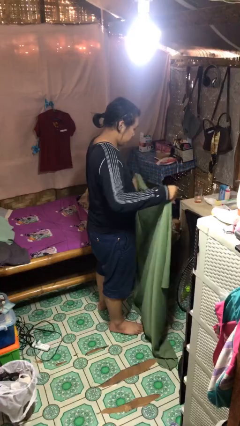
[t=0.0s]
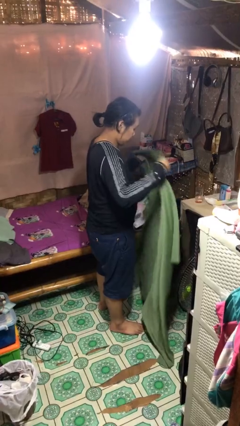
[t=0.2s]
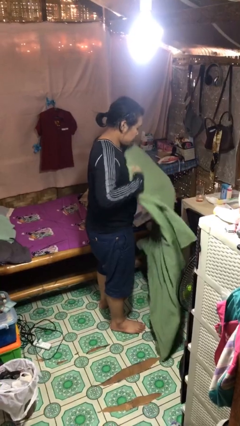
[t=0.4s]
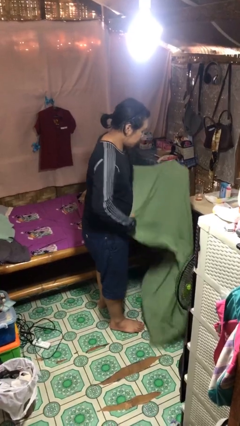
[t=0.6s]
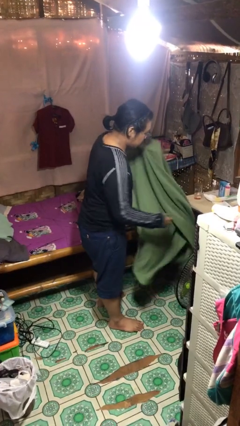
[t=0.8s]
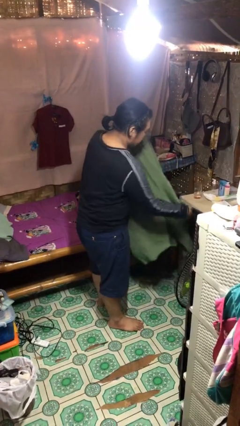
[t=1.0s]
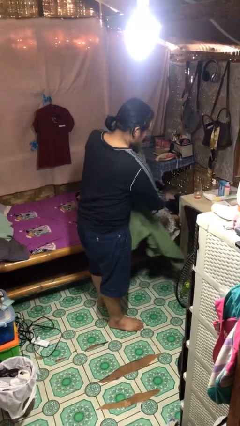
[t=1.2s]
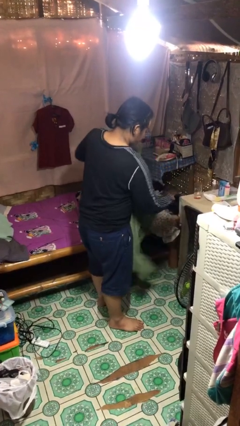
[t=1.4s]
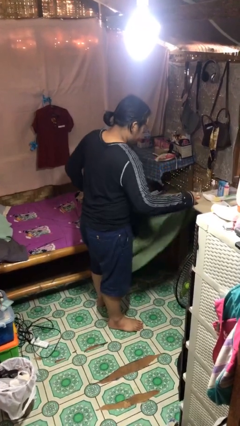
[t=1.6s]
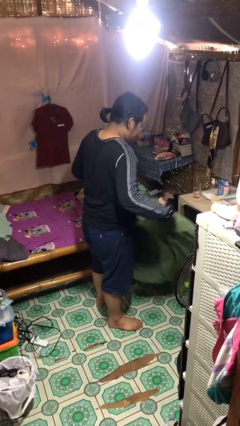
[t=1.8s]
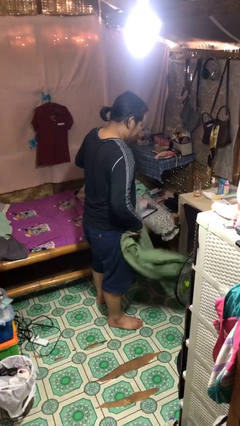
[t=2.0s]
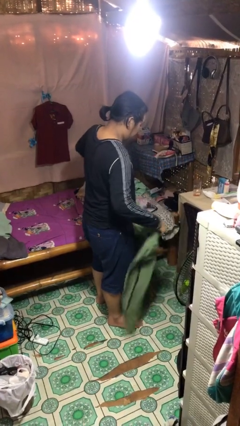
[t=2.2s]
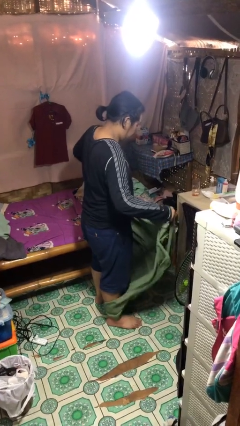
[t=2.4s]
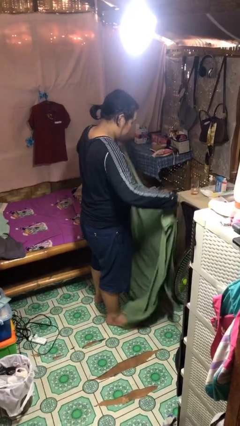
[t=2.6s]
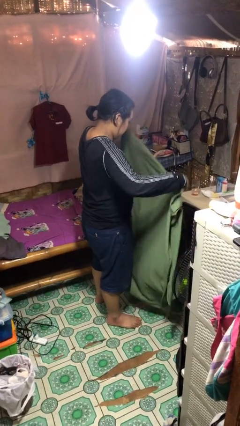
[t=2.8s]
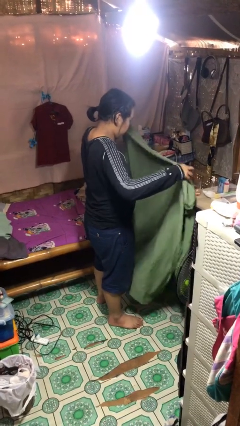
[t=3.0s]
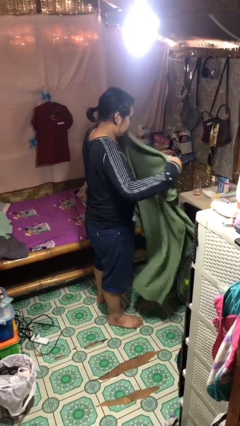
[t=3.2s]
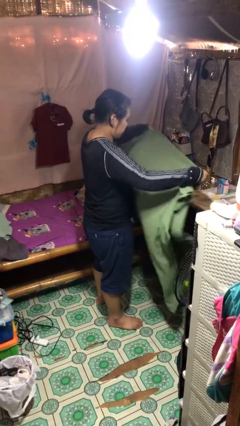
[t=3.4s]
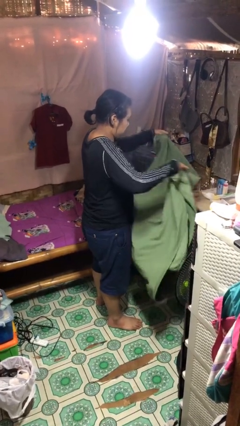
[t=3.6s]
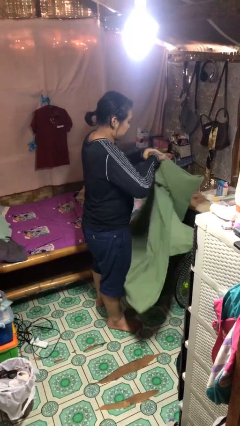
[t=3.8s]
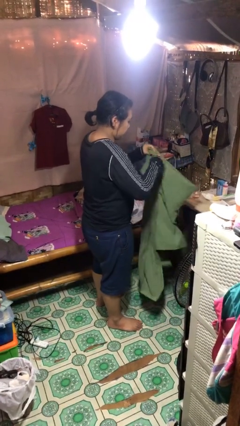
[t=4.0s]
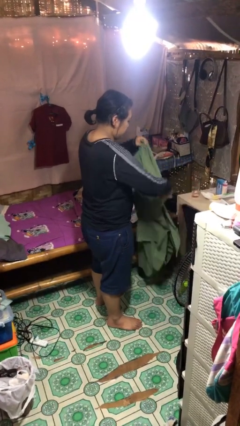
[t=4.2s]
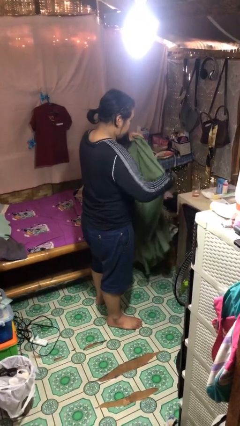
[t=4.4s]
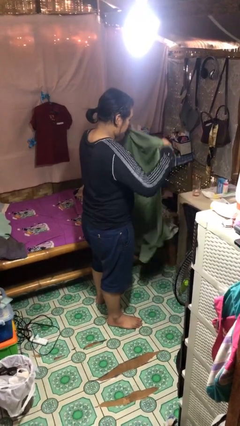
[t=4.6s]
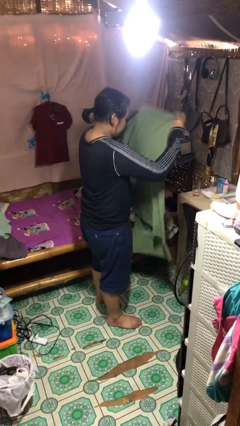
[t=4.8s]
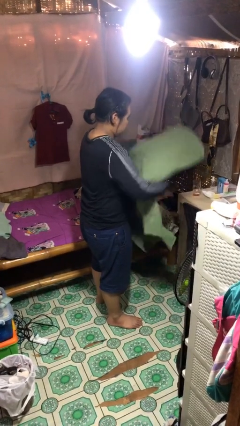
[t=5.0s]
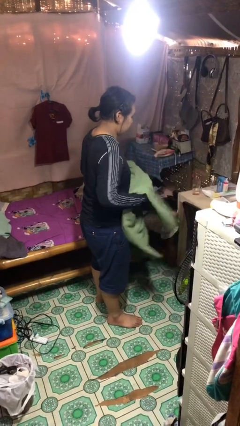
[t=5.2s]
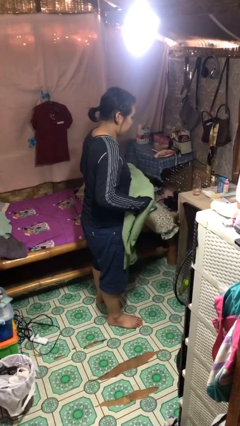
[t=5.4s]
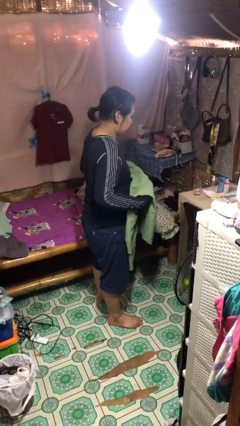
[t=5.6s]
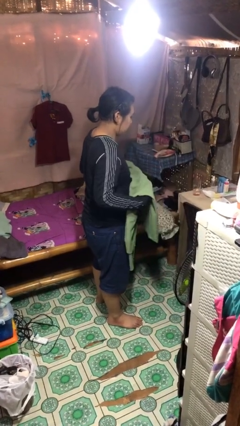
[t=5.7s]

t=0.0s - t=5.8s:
person folds blanket

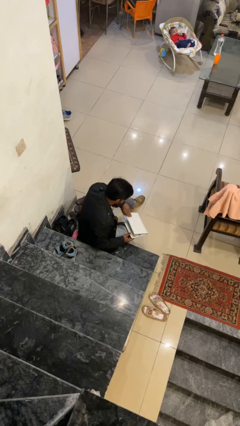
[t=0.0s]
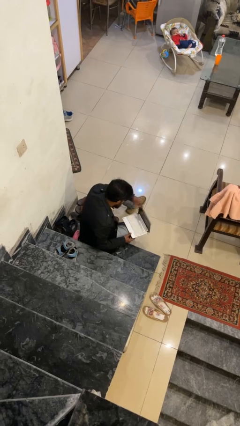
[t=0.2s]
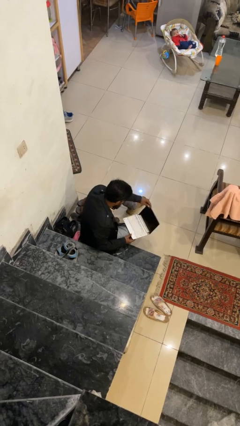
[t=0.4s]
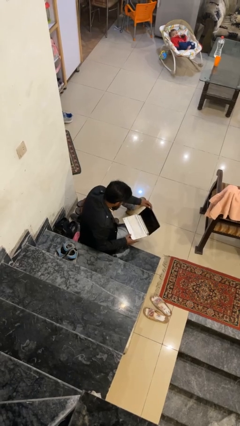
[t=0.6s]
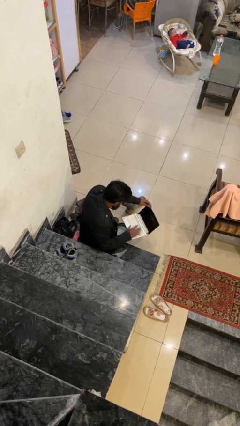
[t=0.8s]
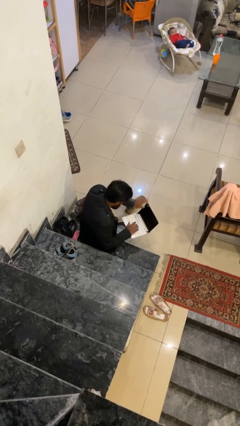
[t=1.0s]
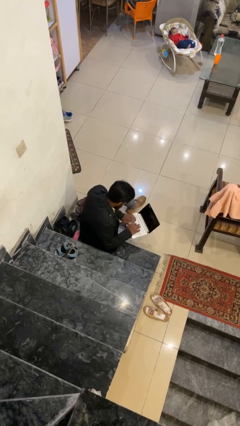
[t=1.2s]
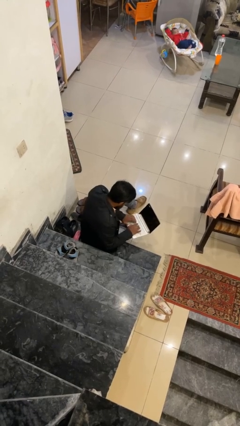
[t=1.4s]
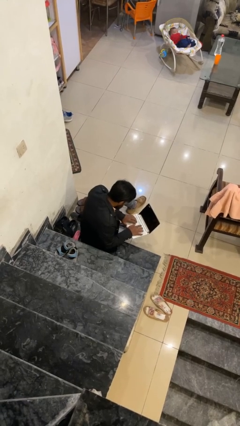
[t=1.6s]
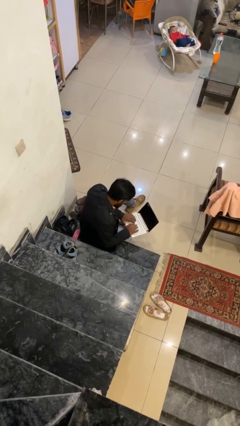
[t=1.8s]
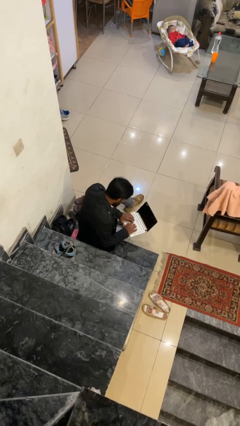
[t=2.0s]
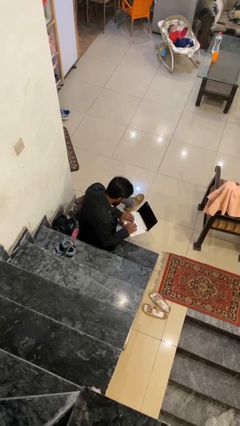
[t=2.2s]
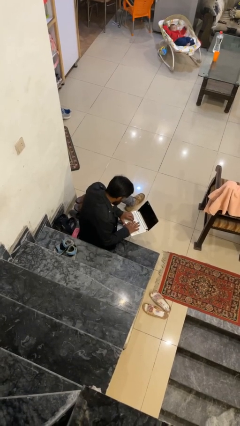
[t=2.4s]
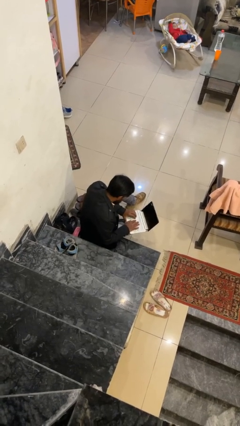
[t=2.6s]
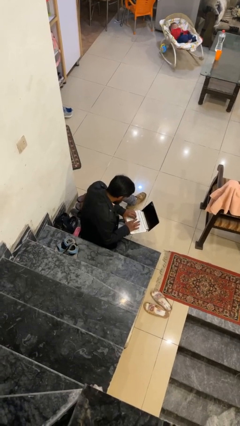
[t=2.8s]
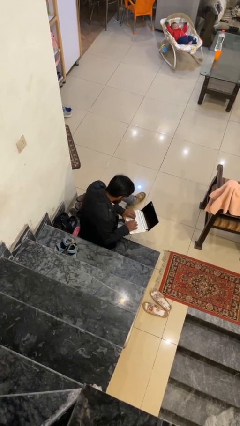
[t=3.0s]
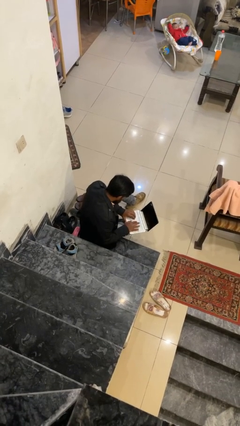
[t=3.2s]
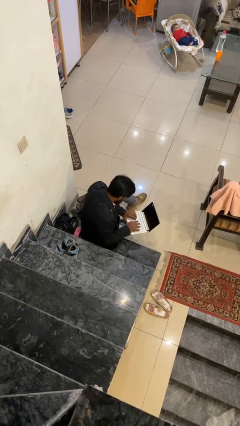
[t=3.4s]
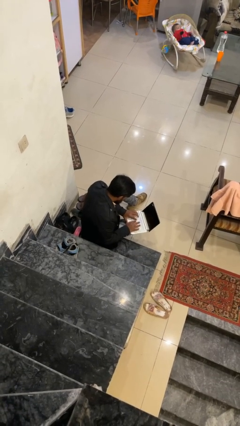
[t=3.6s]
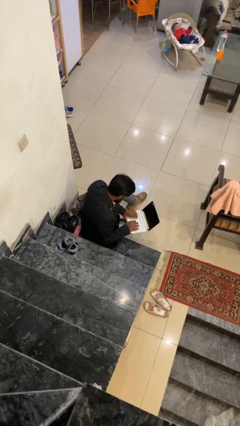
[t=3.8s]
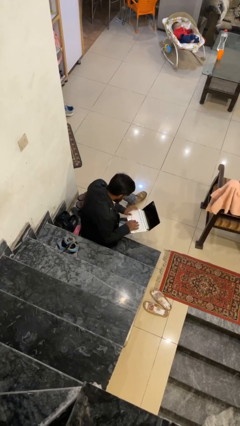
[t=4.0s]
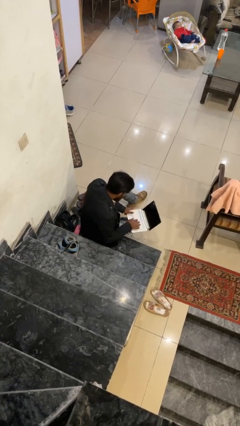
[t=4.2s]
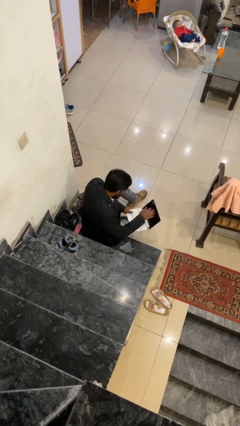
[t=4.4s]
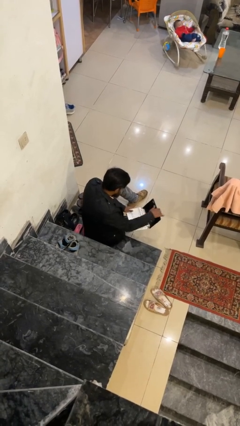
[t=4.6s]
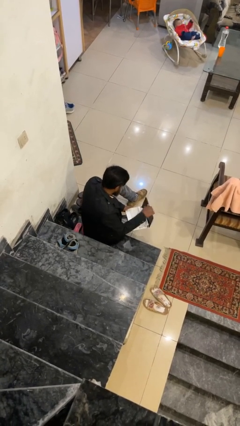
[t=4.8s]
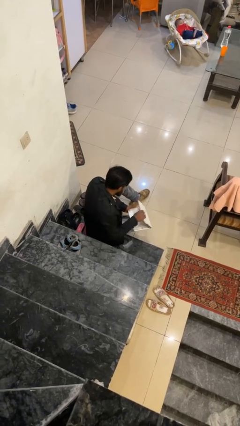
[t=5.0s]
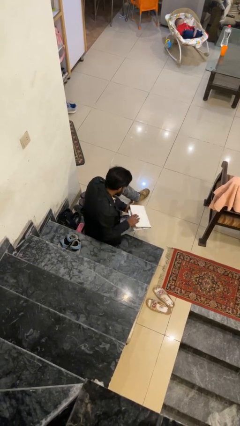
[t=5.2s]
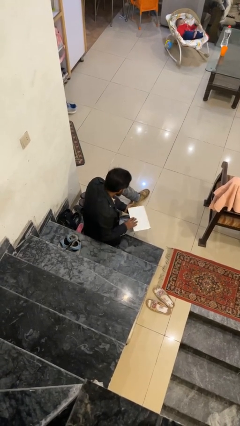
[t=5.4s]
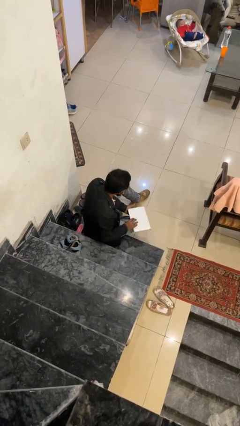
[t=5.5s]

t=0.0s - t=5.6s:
person interacts with laptop

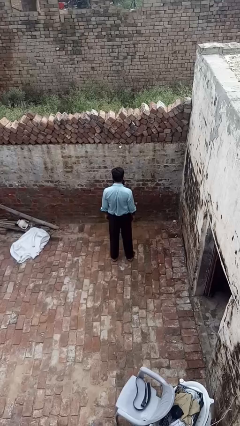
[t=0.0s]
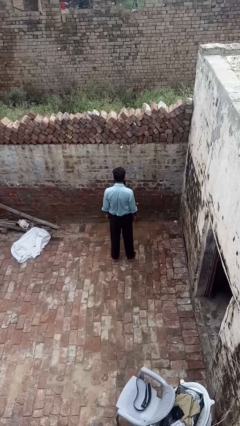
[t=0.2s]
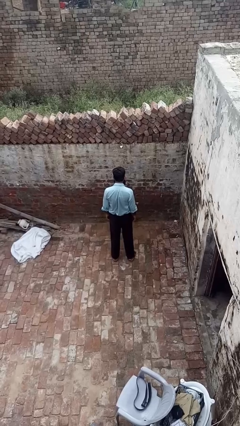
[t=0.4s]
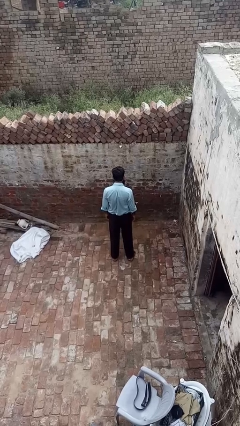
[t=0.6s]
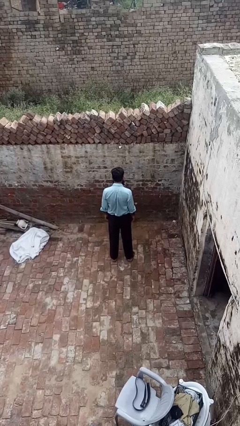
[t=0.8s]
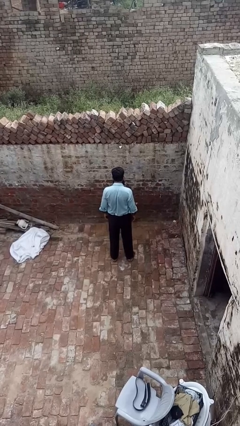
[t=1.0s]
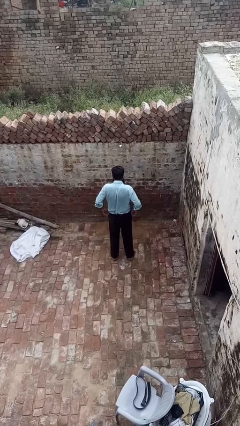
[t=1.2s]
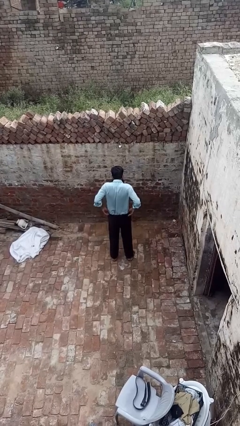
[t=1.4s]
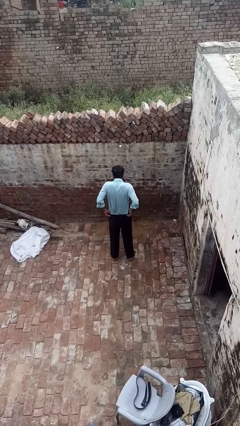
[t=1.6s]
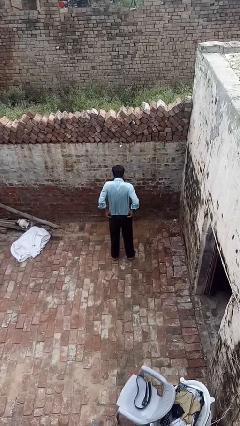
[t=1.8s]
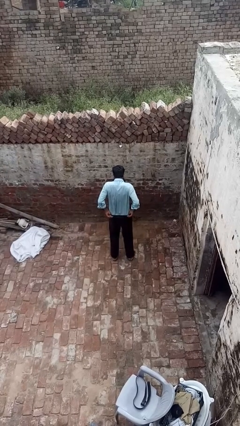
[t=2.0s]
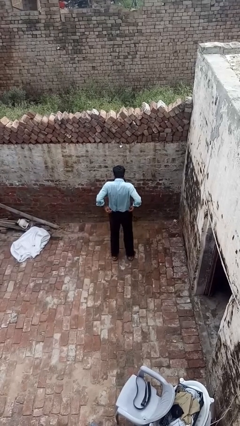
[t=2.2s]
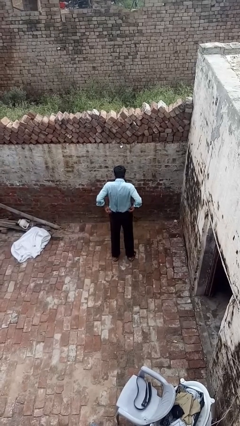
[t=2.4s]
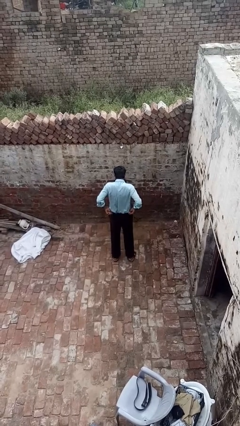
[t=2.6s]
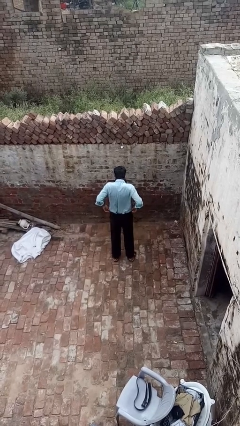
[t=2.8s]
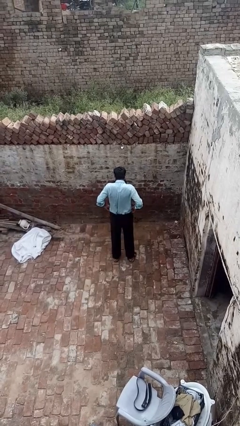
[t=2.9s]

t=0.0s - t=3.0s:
person hikes up pants

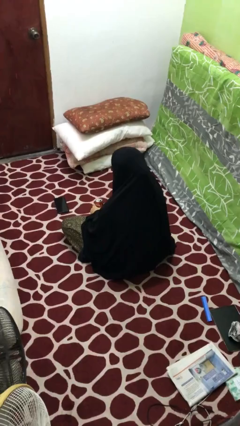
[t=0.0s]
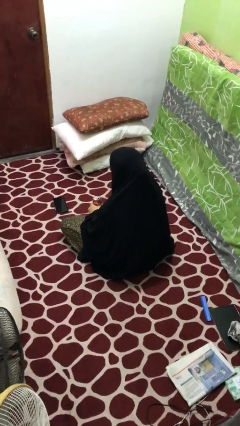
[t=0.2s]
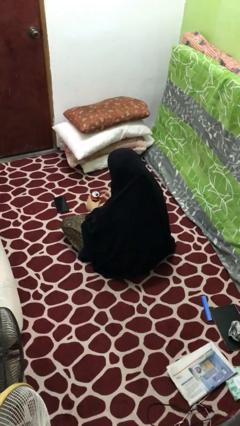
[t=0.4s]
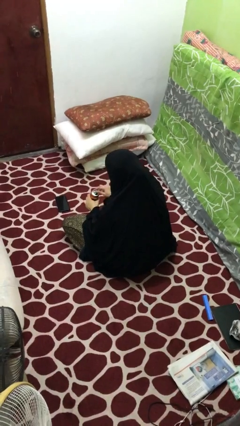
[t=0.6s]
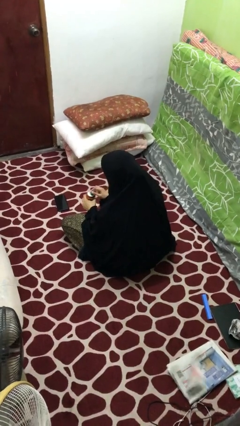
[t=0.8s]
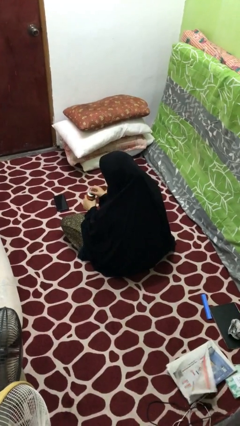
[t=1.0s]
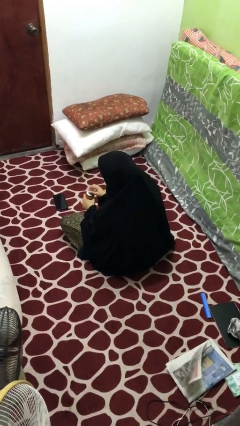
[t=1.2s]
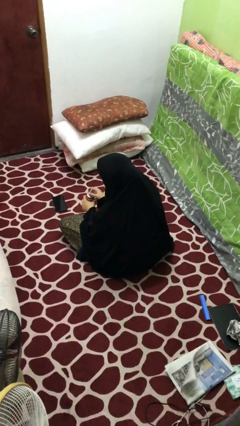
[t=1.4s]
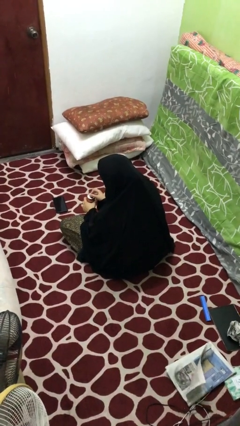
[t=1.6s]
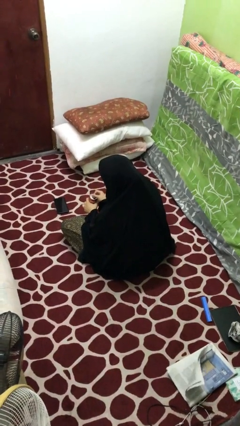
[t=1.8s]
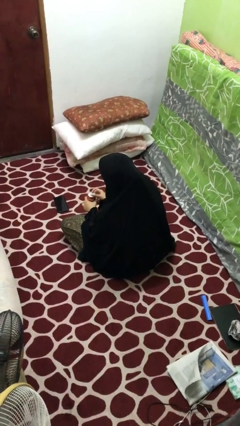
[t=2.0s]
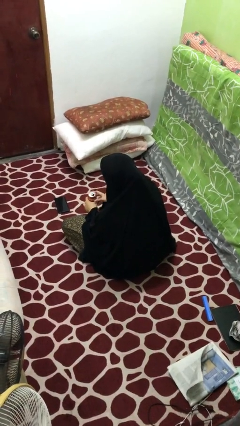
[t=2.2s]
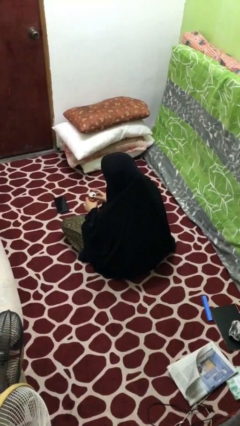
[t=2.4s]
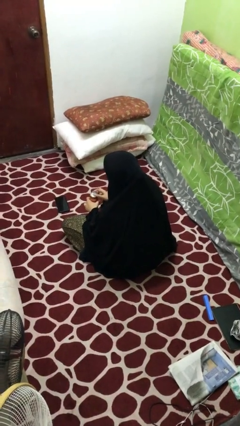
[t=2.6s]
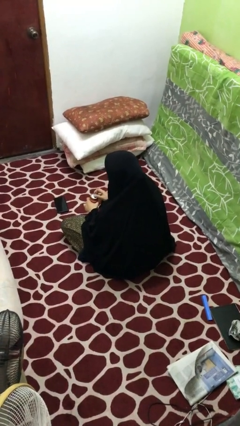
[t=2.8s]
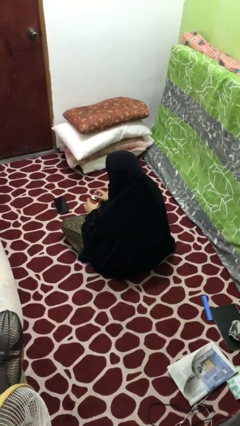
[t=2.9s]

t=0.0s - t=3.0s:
person opens beverage can

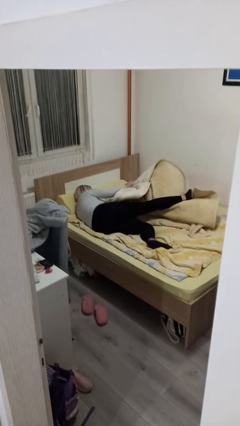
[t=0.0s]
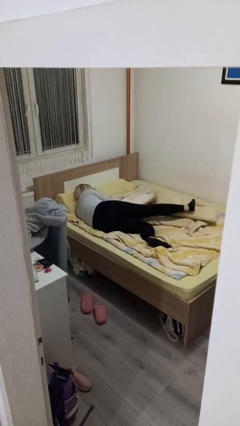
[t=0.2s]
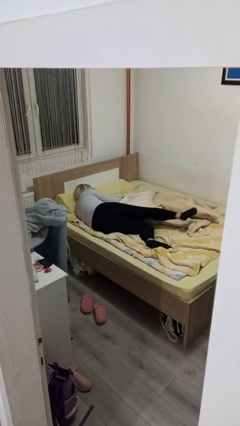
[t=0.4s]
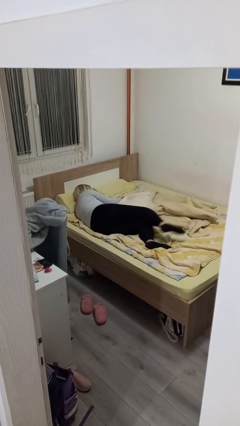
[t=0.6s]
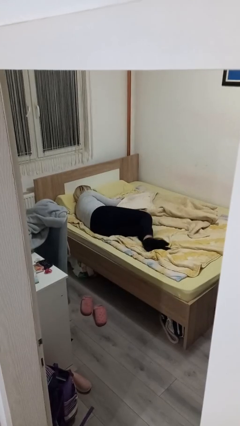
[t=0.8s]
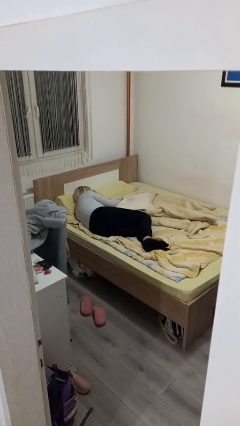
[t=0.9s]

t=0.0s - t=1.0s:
person uncovers with bedsheets
